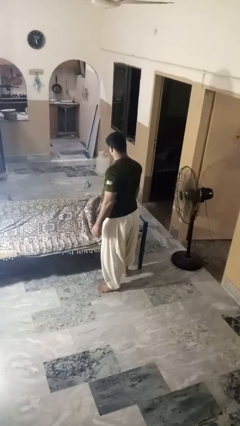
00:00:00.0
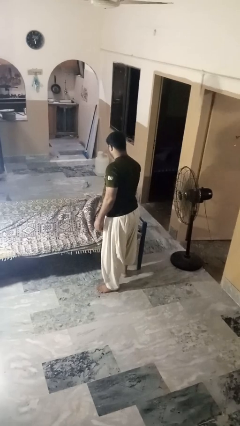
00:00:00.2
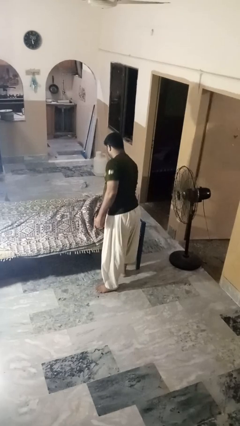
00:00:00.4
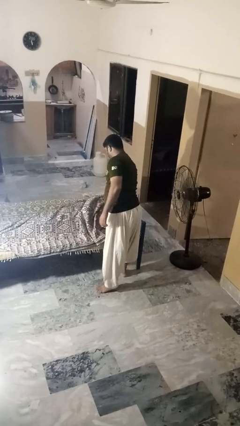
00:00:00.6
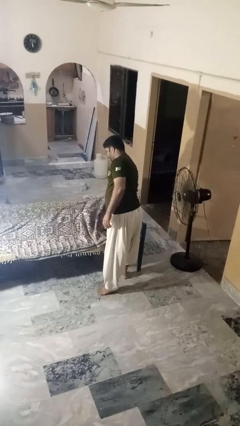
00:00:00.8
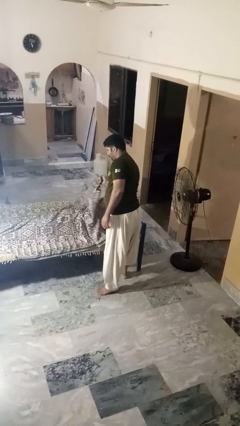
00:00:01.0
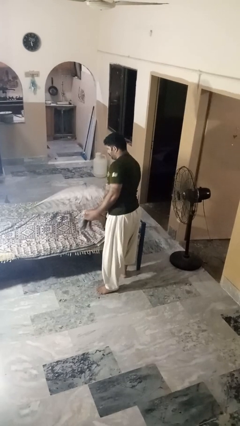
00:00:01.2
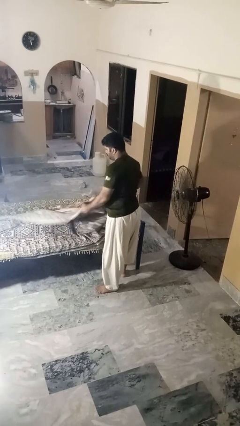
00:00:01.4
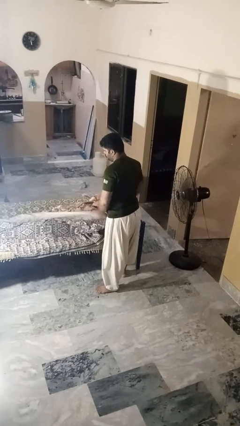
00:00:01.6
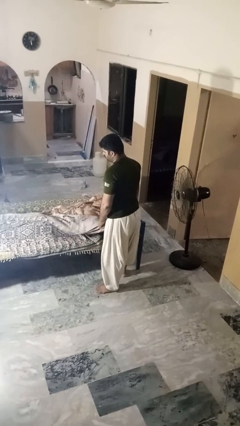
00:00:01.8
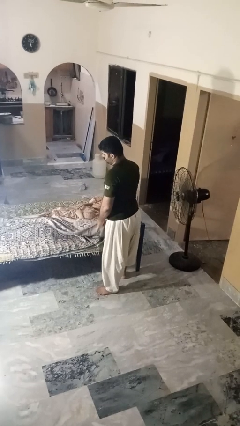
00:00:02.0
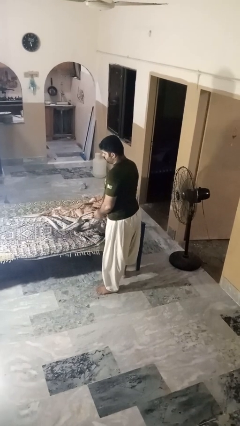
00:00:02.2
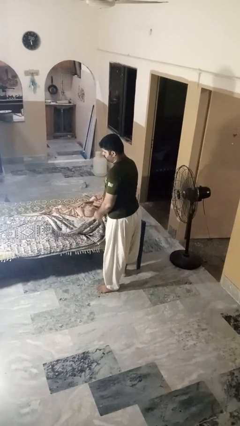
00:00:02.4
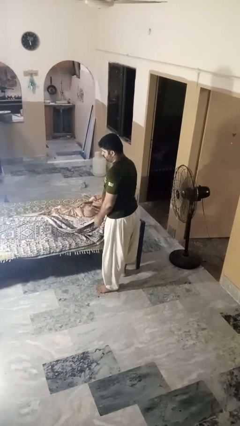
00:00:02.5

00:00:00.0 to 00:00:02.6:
person uncovers friend with blanket

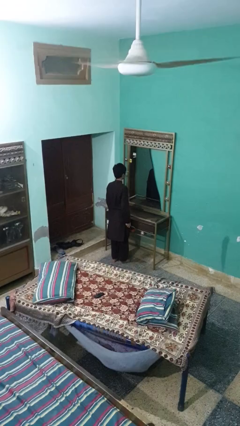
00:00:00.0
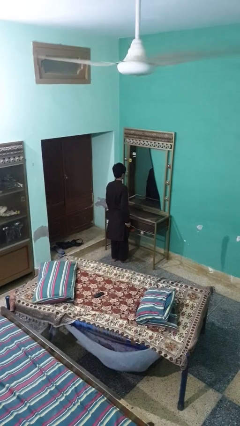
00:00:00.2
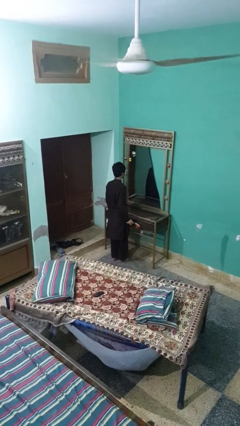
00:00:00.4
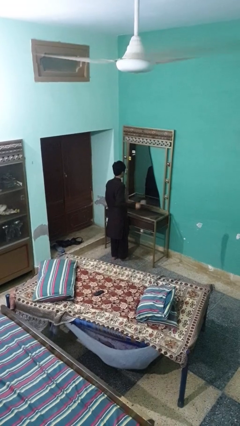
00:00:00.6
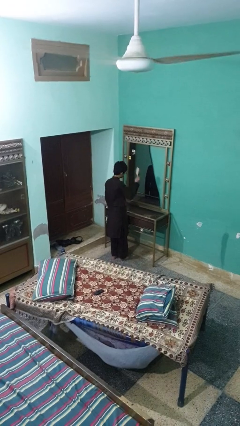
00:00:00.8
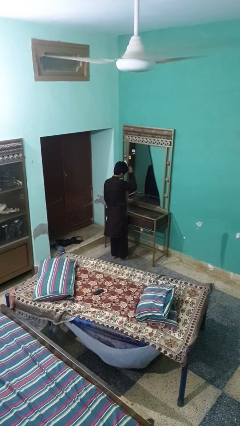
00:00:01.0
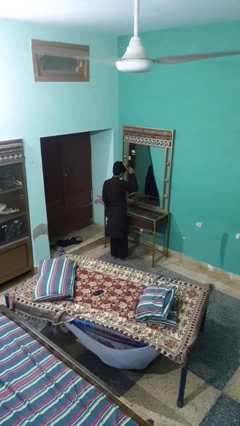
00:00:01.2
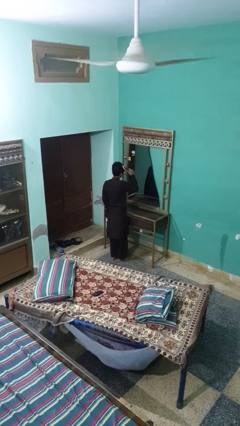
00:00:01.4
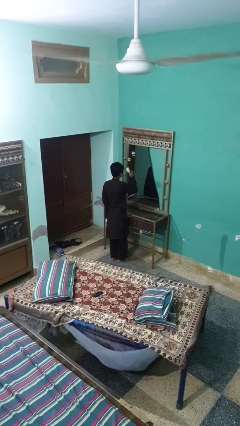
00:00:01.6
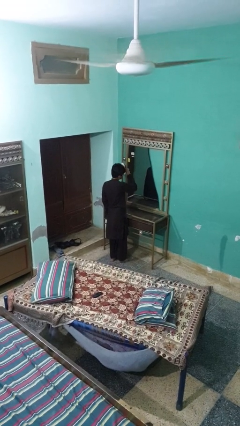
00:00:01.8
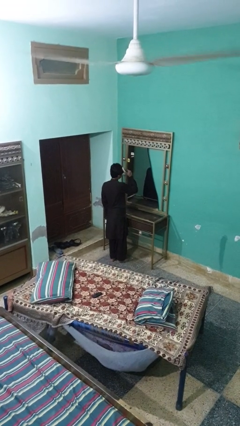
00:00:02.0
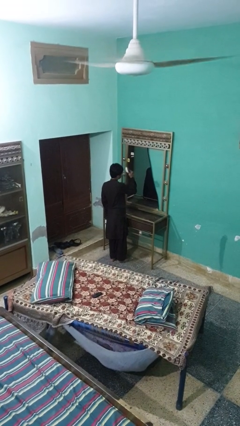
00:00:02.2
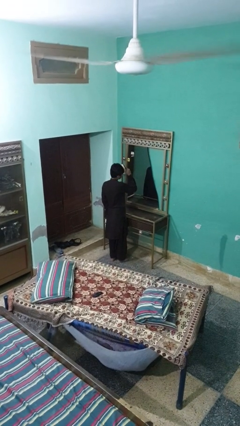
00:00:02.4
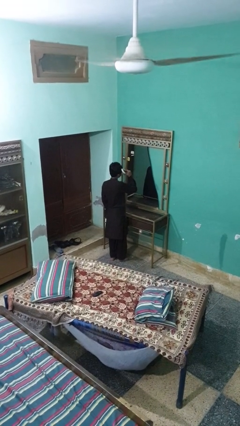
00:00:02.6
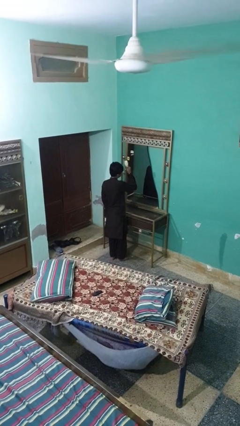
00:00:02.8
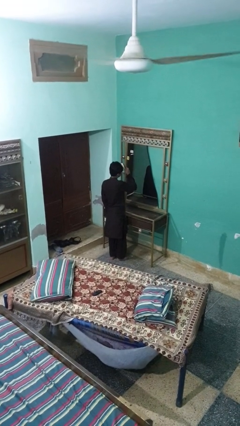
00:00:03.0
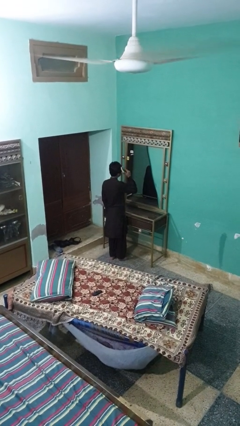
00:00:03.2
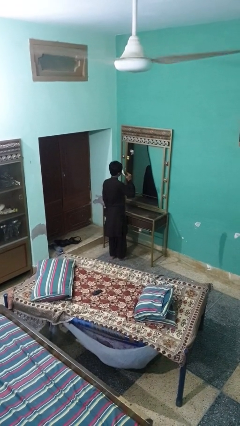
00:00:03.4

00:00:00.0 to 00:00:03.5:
person brushes hair

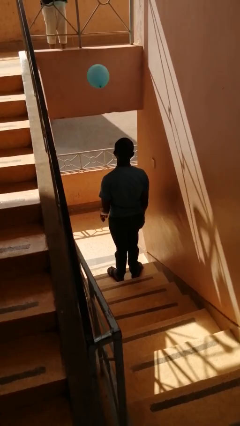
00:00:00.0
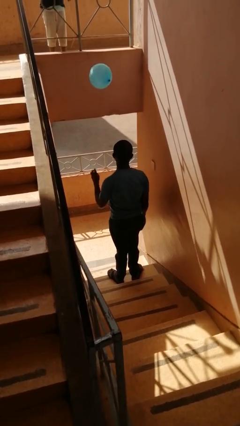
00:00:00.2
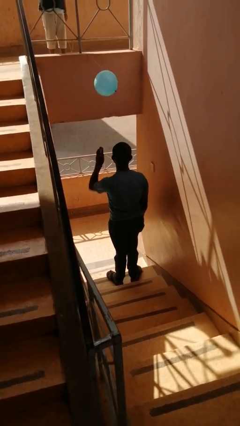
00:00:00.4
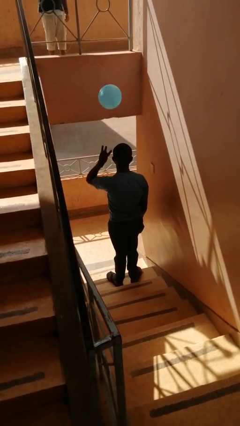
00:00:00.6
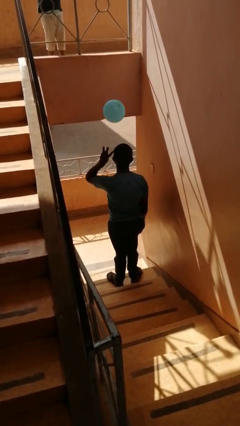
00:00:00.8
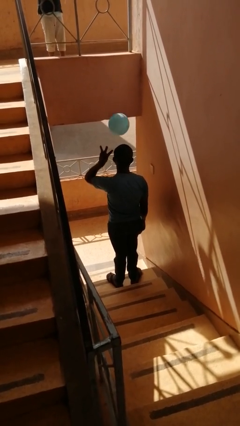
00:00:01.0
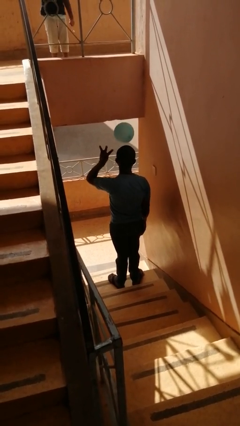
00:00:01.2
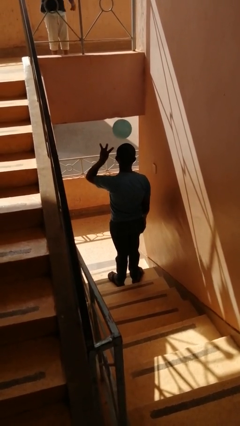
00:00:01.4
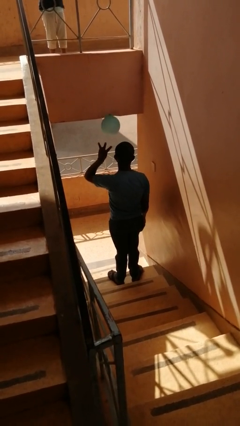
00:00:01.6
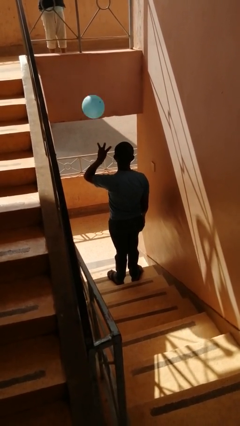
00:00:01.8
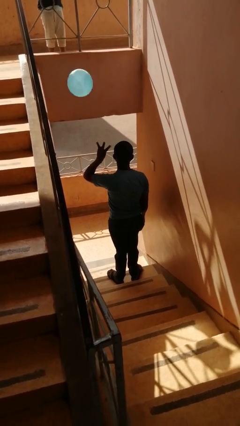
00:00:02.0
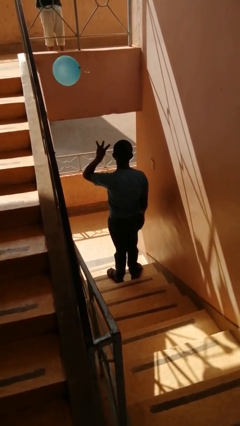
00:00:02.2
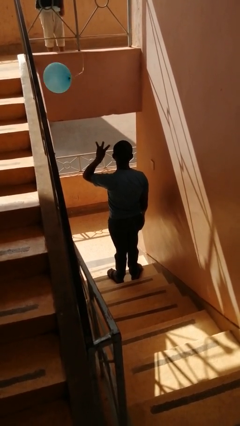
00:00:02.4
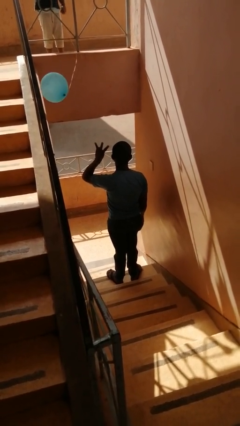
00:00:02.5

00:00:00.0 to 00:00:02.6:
person gestures number three

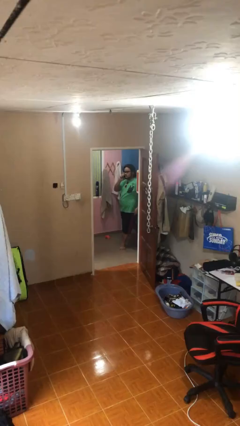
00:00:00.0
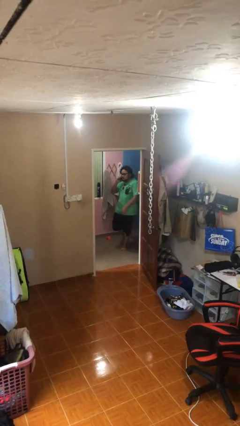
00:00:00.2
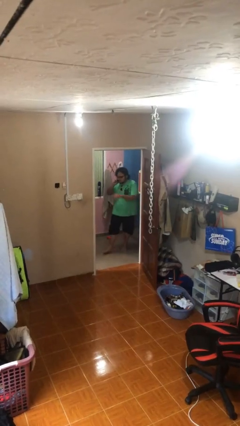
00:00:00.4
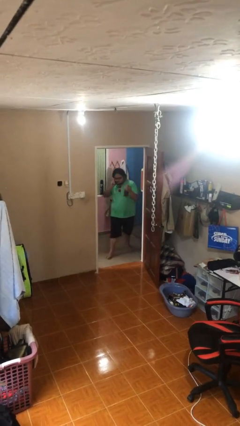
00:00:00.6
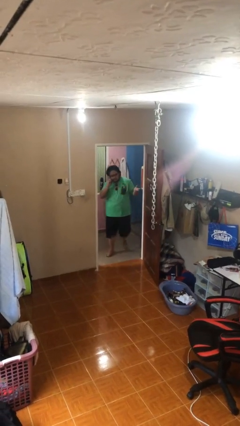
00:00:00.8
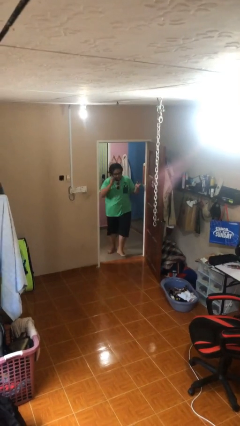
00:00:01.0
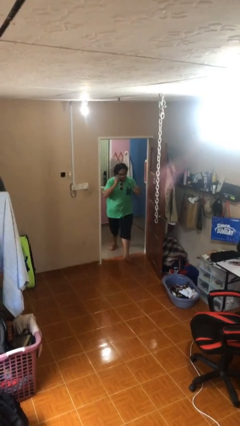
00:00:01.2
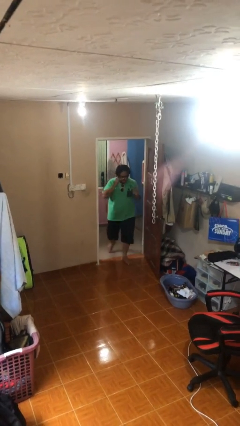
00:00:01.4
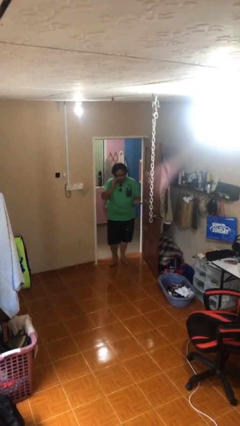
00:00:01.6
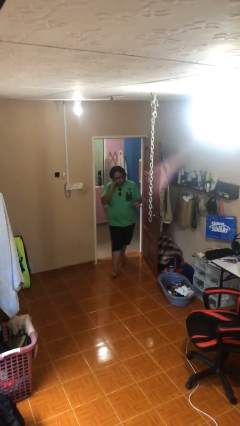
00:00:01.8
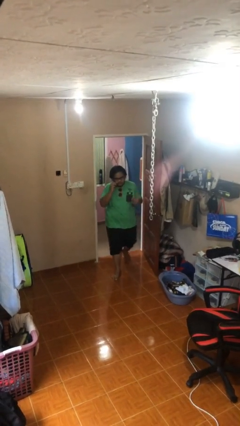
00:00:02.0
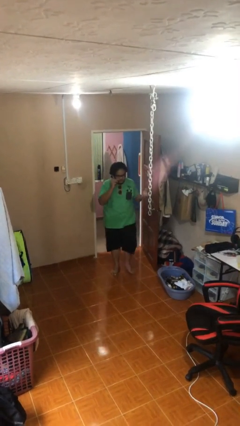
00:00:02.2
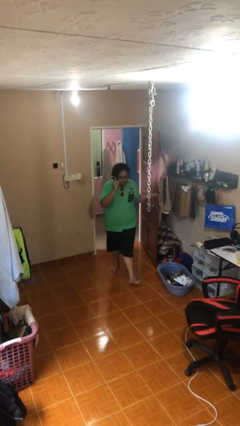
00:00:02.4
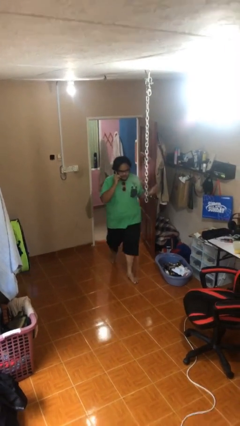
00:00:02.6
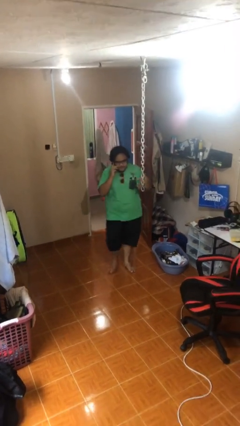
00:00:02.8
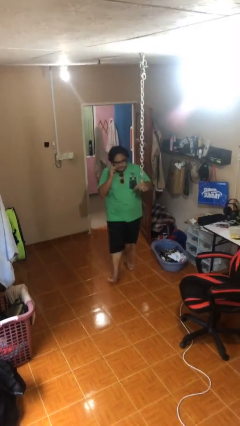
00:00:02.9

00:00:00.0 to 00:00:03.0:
person enters scene through structure

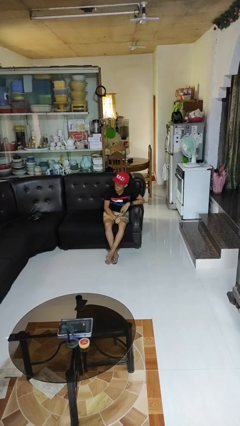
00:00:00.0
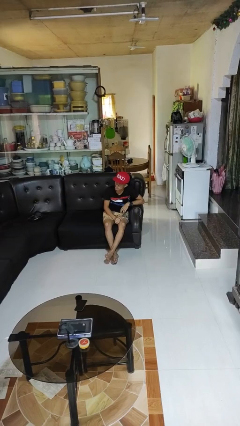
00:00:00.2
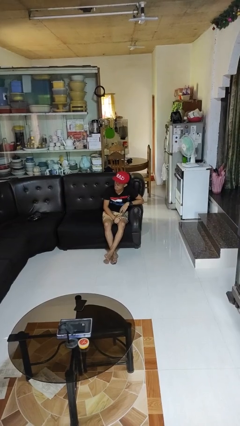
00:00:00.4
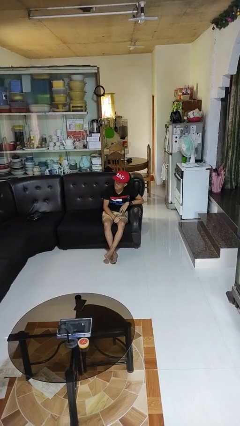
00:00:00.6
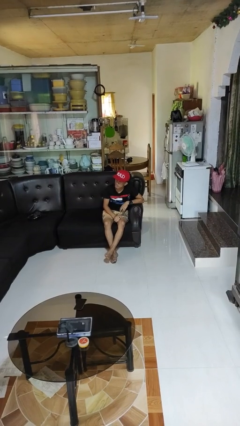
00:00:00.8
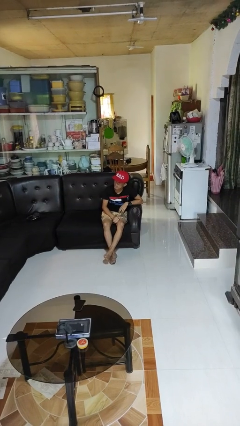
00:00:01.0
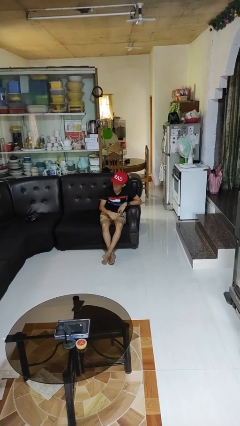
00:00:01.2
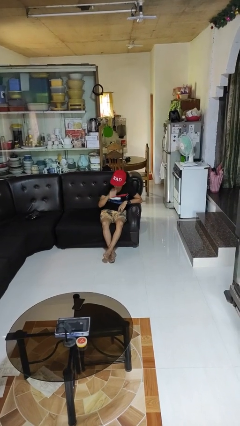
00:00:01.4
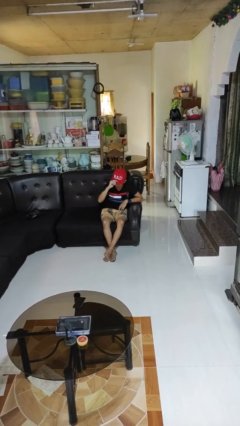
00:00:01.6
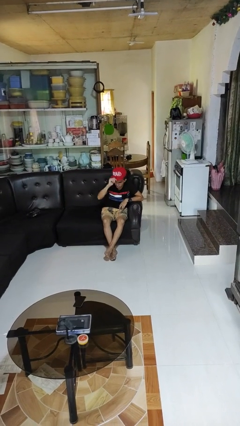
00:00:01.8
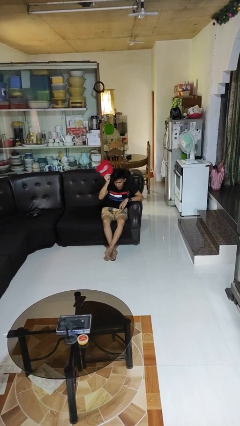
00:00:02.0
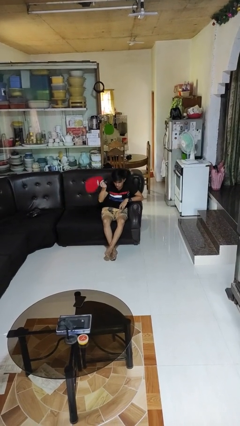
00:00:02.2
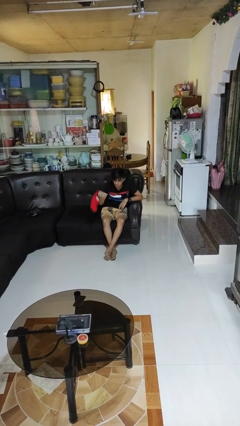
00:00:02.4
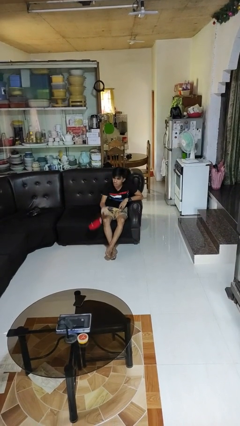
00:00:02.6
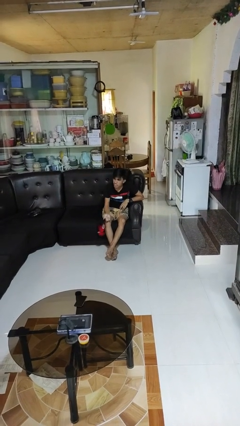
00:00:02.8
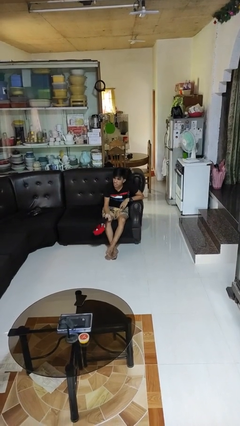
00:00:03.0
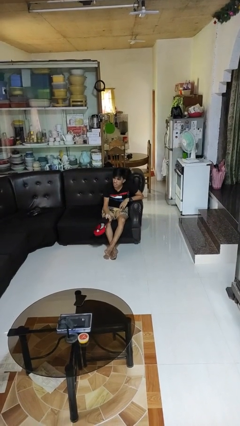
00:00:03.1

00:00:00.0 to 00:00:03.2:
person takes off hat

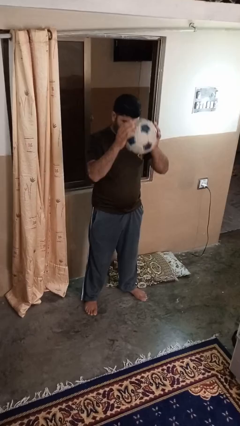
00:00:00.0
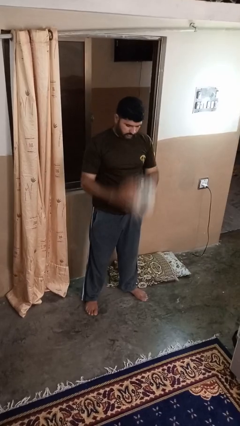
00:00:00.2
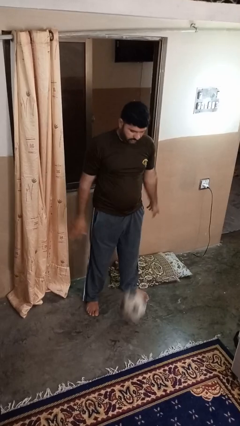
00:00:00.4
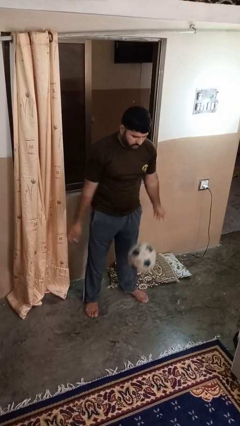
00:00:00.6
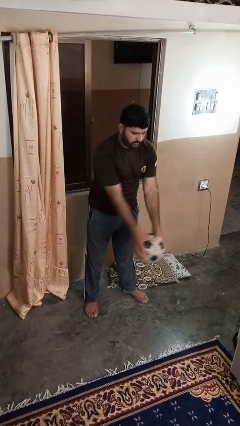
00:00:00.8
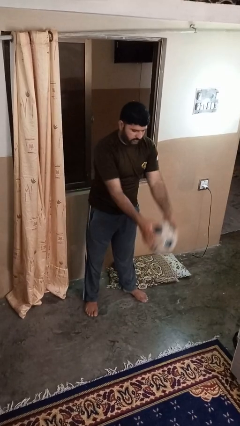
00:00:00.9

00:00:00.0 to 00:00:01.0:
person bounces ball on floor

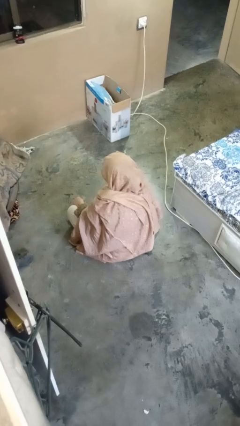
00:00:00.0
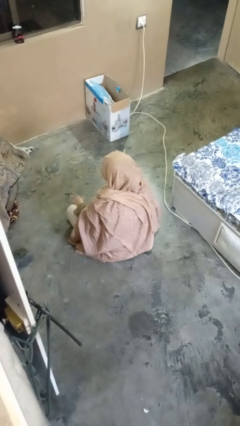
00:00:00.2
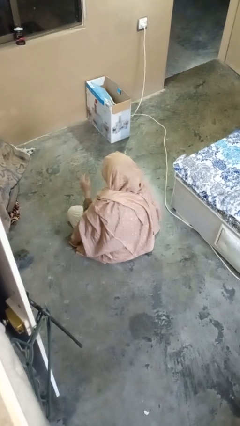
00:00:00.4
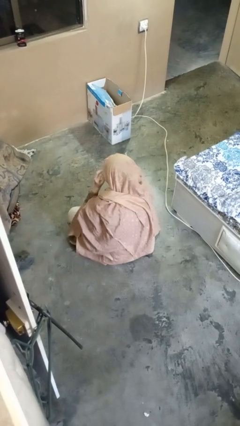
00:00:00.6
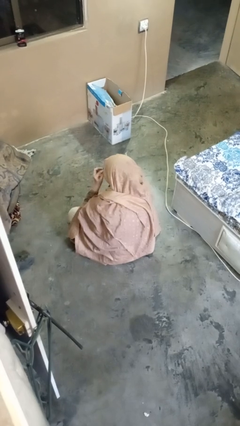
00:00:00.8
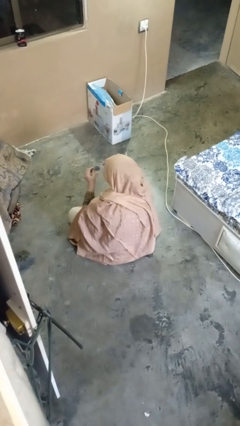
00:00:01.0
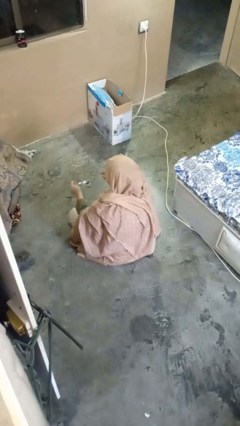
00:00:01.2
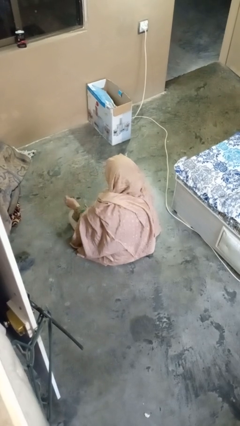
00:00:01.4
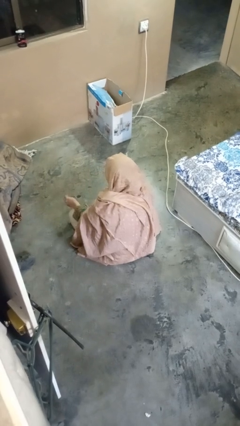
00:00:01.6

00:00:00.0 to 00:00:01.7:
person takes off glasses
